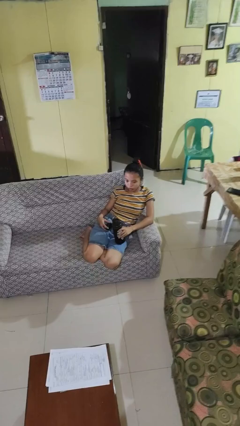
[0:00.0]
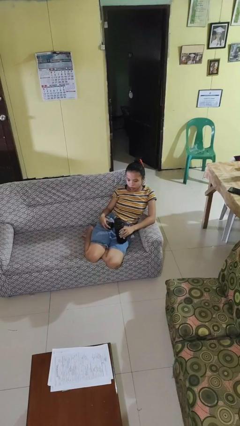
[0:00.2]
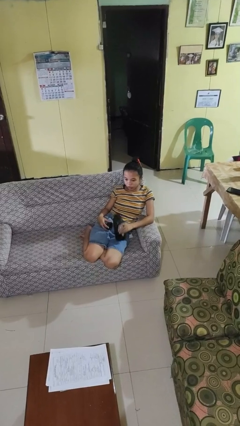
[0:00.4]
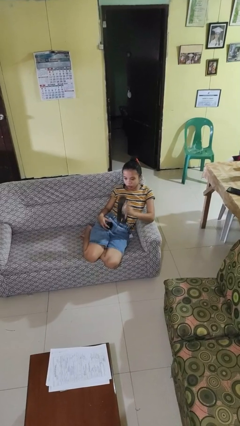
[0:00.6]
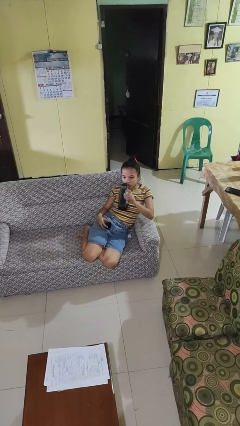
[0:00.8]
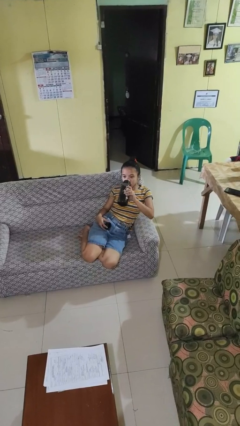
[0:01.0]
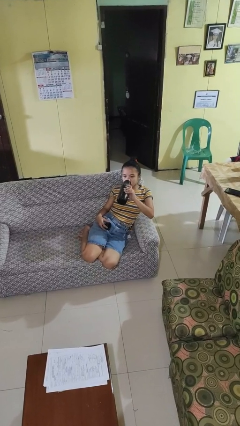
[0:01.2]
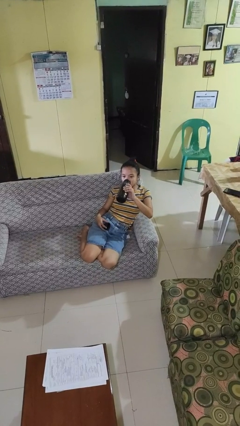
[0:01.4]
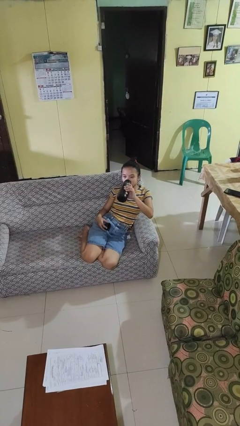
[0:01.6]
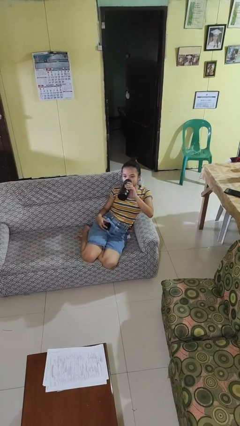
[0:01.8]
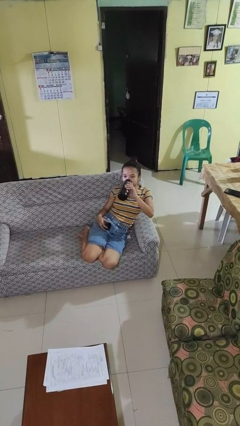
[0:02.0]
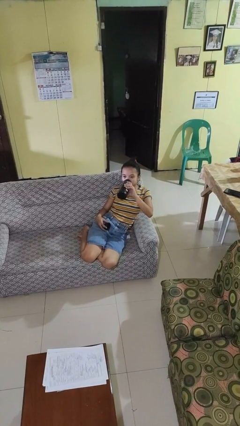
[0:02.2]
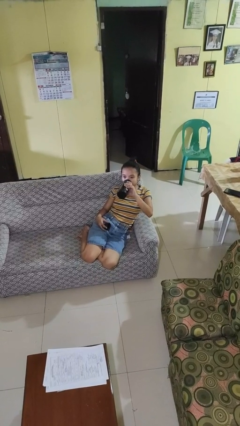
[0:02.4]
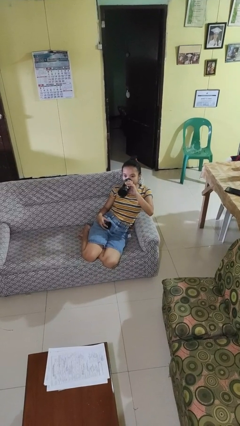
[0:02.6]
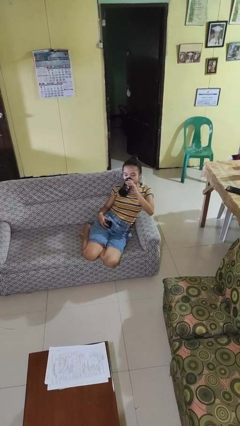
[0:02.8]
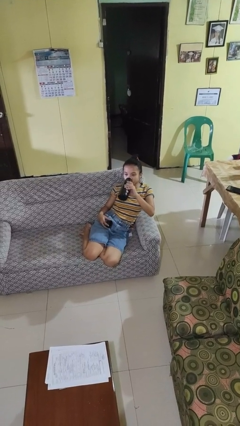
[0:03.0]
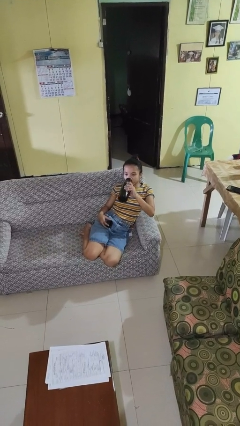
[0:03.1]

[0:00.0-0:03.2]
person drinks from bottle

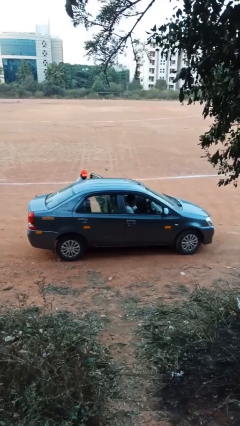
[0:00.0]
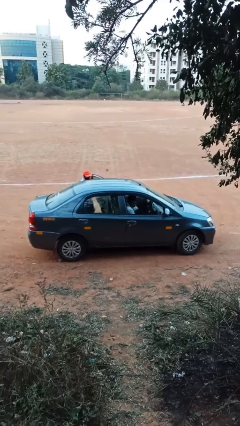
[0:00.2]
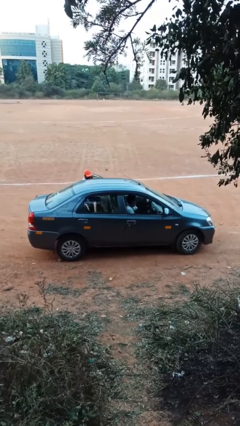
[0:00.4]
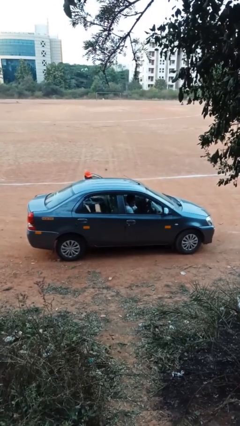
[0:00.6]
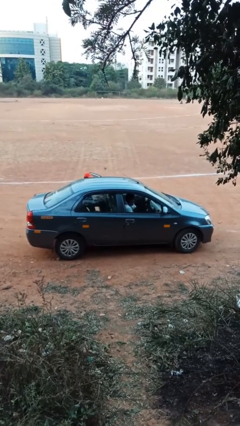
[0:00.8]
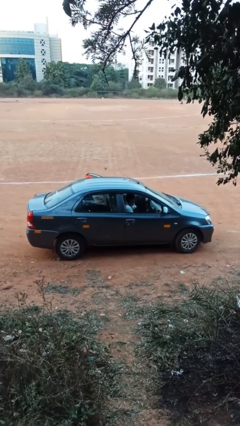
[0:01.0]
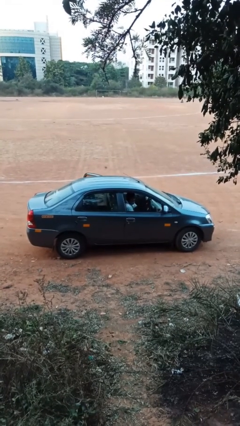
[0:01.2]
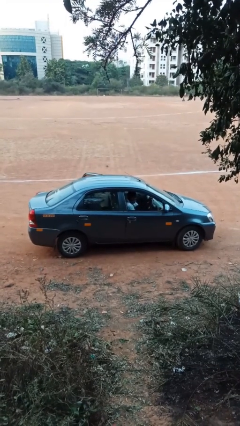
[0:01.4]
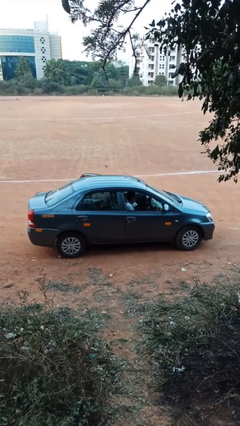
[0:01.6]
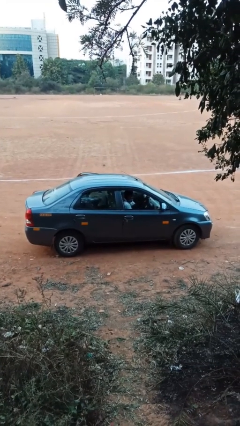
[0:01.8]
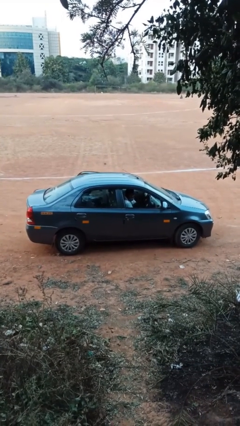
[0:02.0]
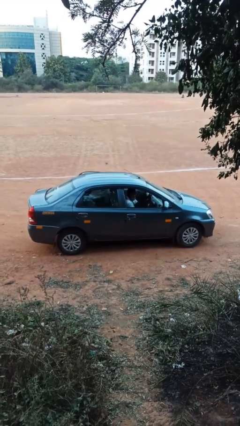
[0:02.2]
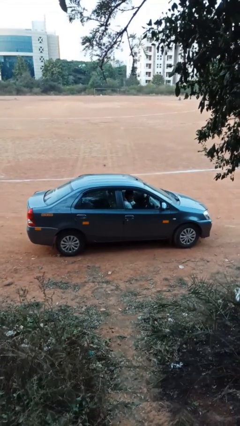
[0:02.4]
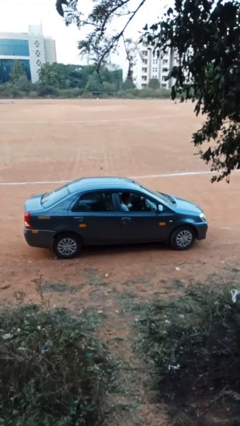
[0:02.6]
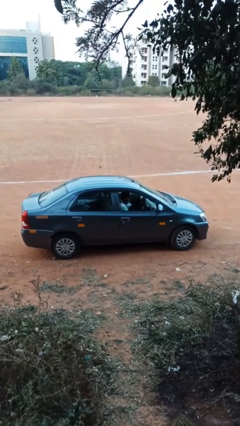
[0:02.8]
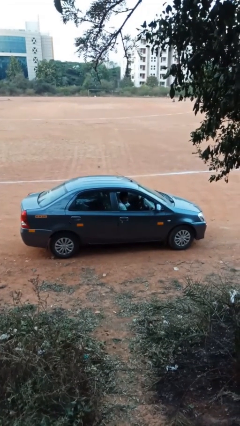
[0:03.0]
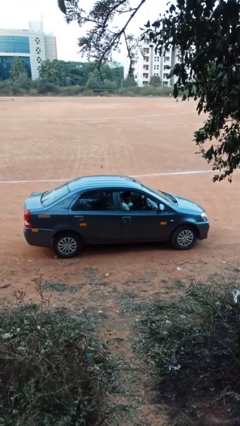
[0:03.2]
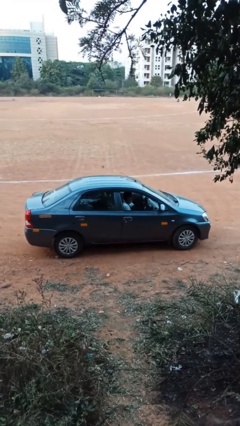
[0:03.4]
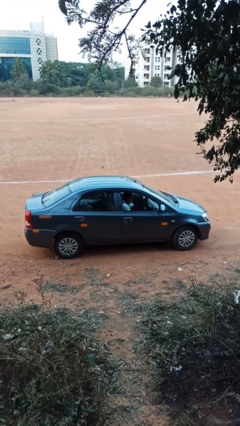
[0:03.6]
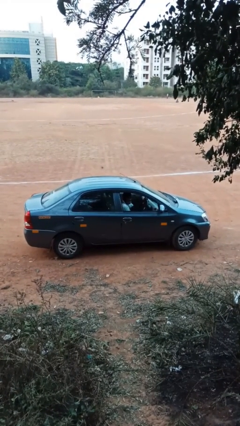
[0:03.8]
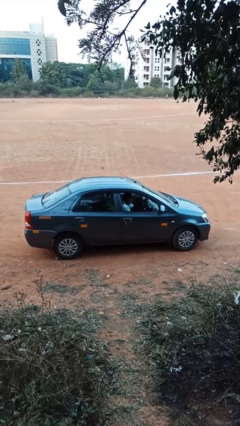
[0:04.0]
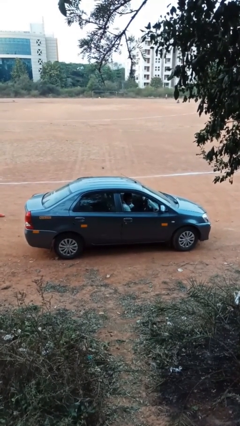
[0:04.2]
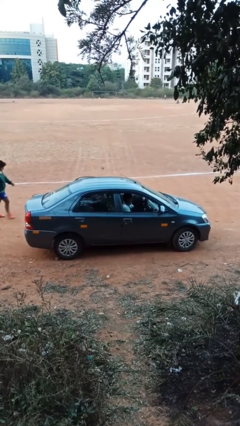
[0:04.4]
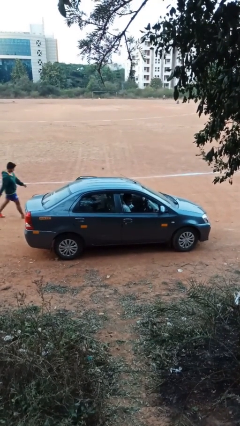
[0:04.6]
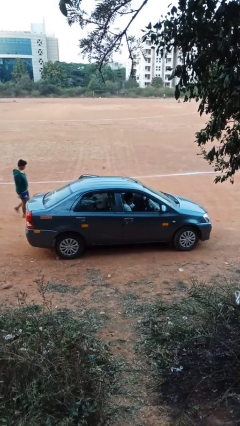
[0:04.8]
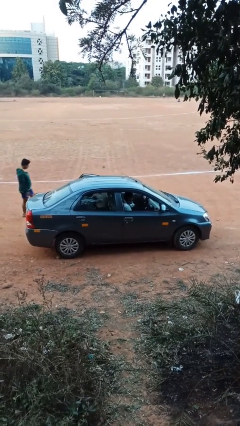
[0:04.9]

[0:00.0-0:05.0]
car picks up person

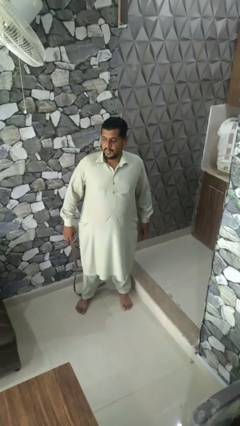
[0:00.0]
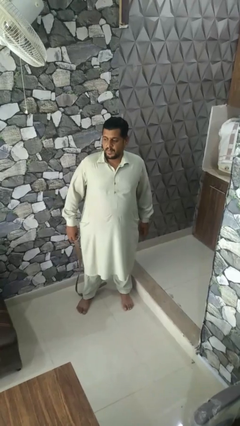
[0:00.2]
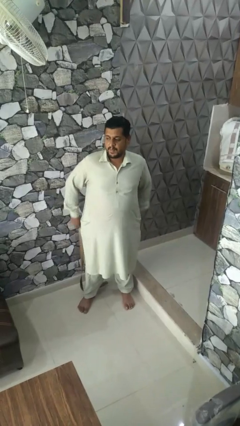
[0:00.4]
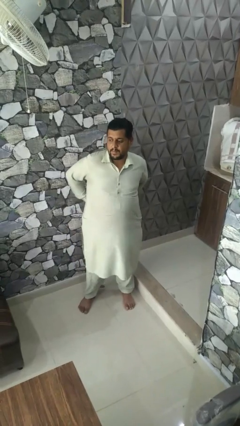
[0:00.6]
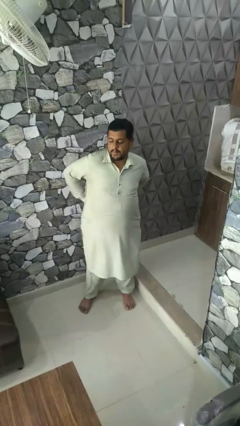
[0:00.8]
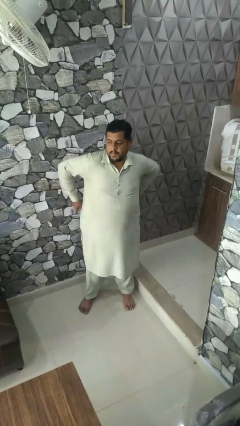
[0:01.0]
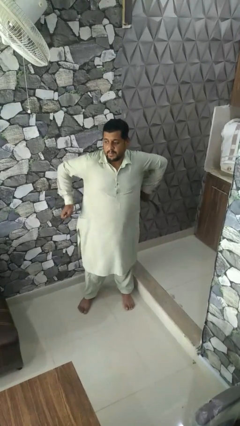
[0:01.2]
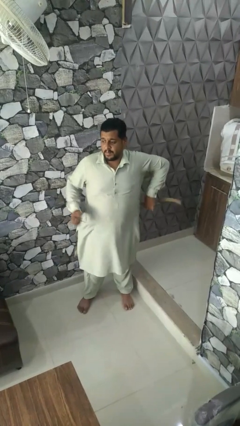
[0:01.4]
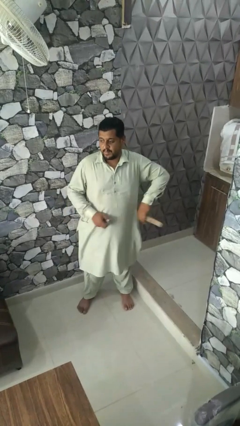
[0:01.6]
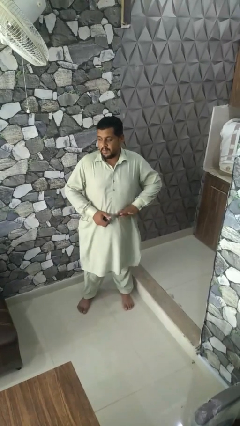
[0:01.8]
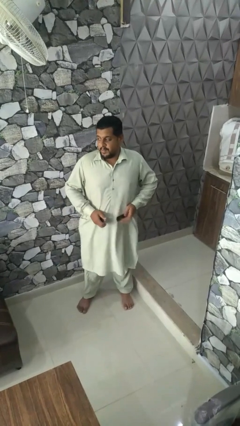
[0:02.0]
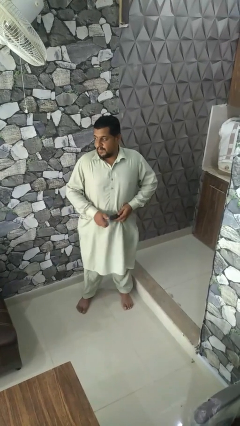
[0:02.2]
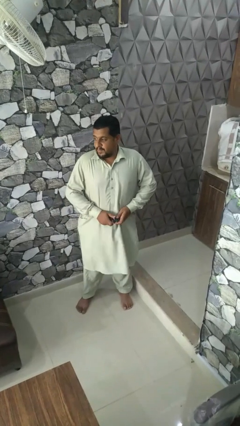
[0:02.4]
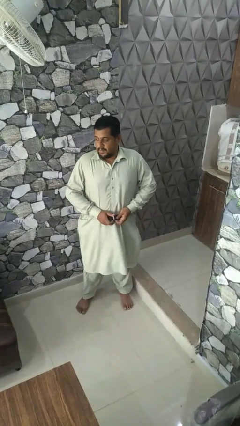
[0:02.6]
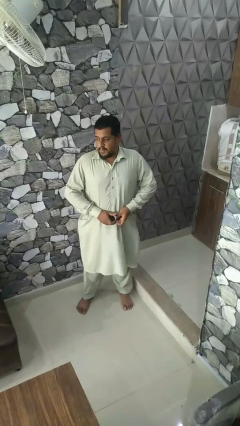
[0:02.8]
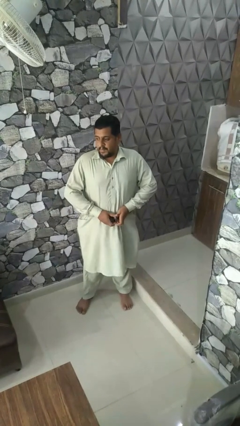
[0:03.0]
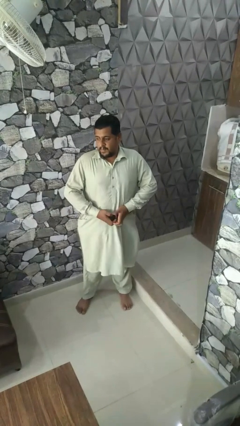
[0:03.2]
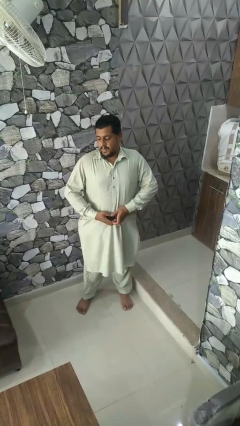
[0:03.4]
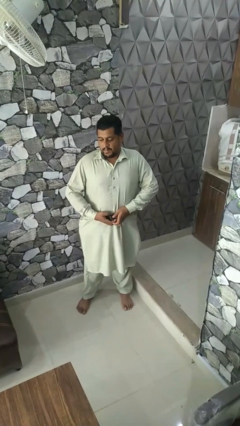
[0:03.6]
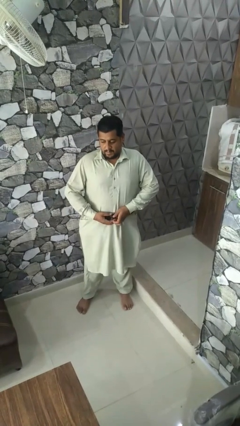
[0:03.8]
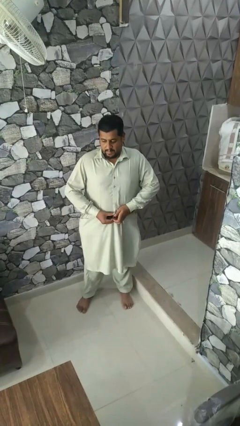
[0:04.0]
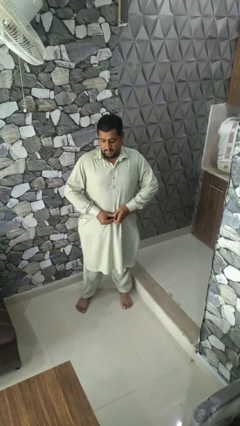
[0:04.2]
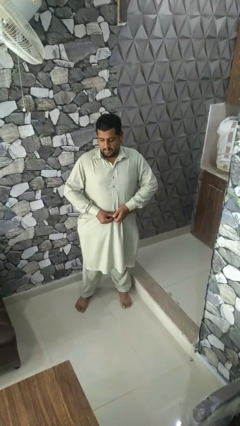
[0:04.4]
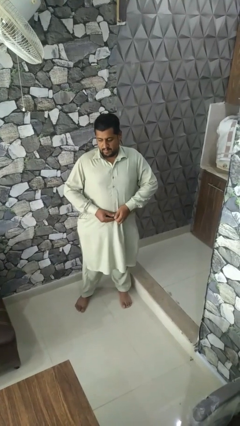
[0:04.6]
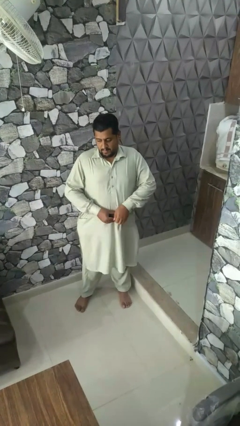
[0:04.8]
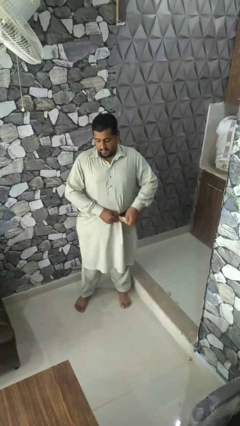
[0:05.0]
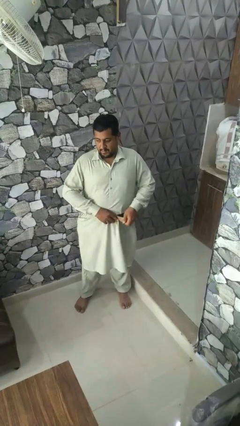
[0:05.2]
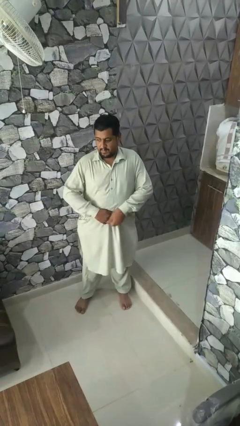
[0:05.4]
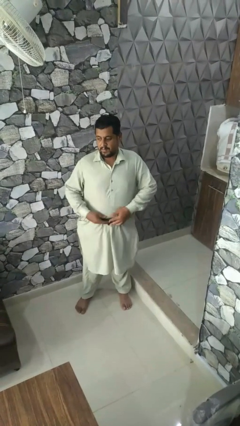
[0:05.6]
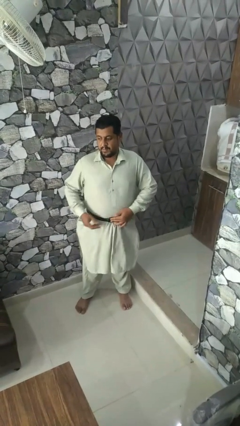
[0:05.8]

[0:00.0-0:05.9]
person puts on belt

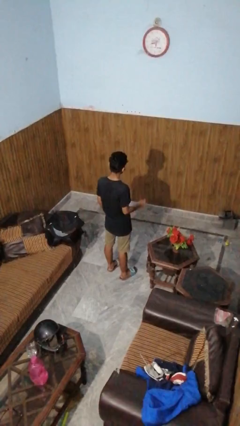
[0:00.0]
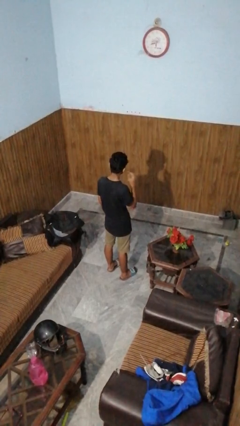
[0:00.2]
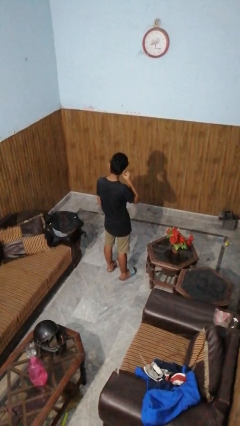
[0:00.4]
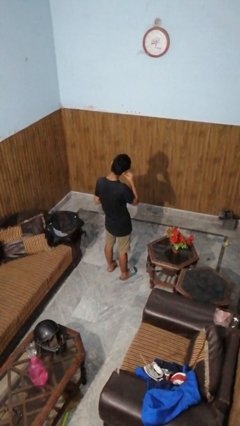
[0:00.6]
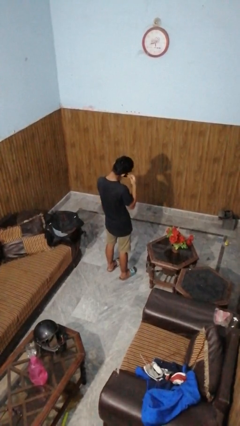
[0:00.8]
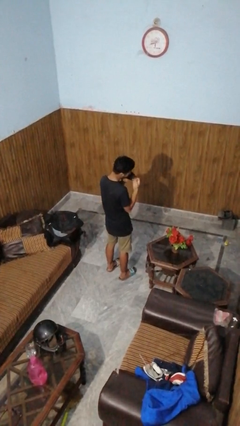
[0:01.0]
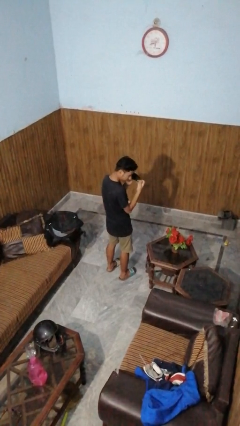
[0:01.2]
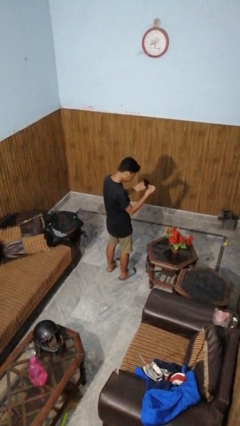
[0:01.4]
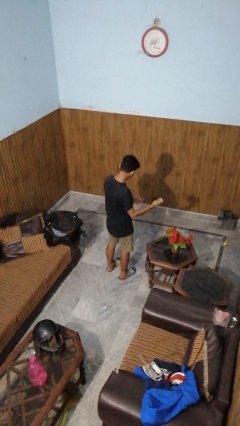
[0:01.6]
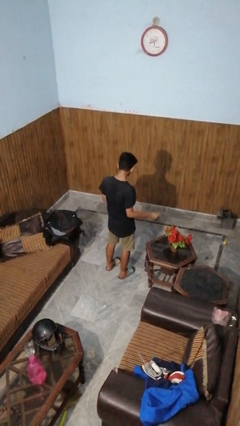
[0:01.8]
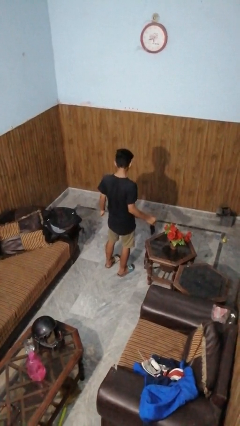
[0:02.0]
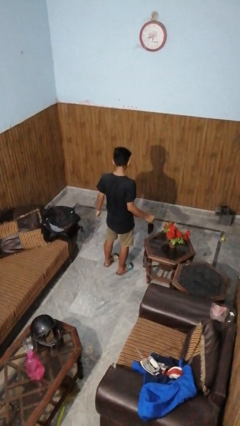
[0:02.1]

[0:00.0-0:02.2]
person takes off facemask

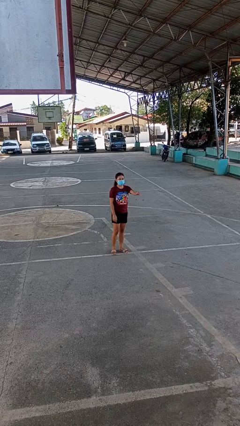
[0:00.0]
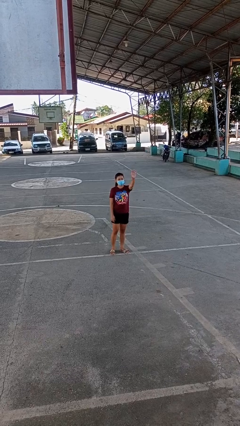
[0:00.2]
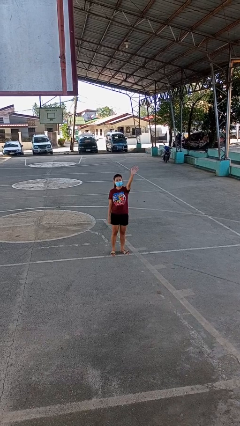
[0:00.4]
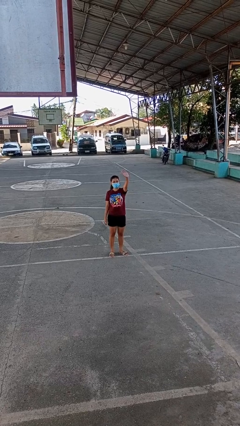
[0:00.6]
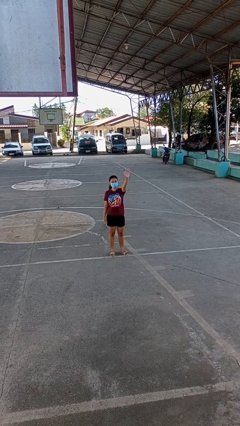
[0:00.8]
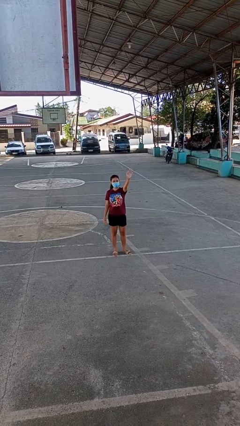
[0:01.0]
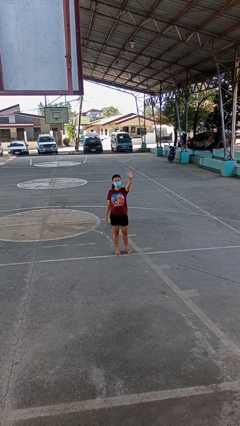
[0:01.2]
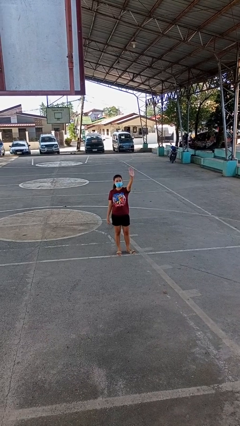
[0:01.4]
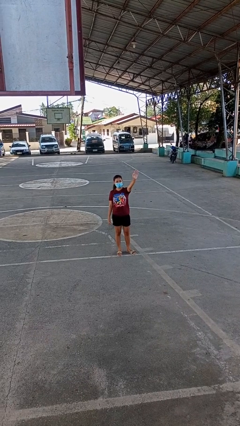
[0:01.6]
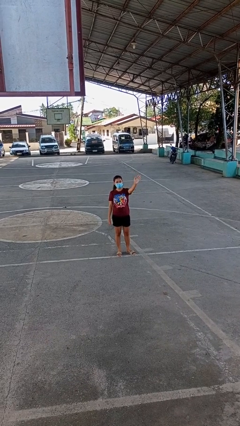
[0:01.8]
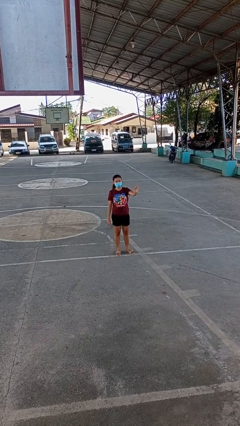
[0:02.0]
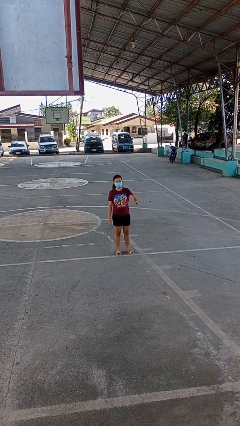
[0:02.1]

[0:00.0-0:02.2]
person waves at person
